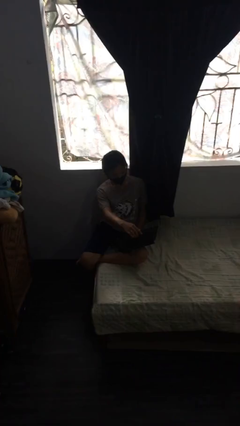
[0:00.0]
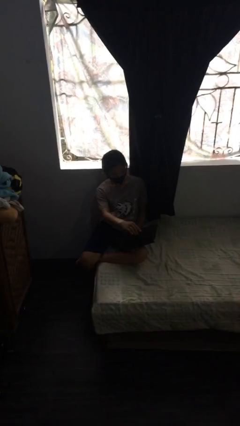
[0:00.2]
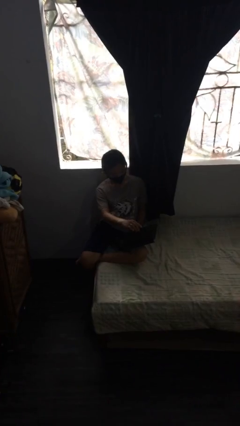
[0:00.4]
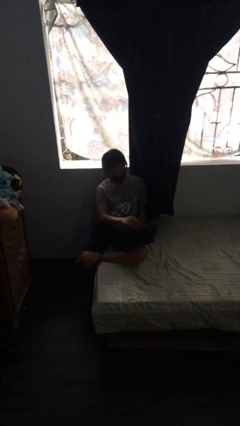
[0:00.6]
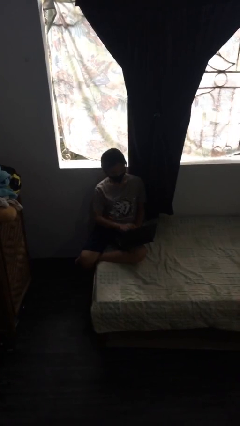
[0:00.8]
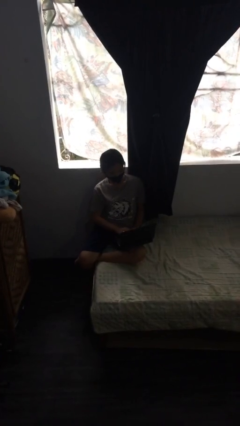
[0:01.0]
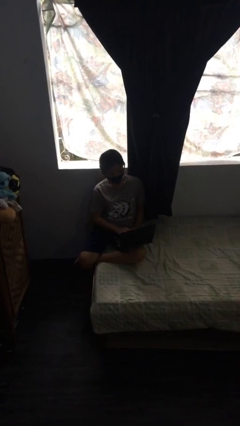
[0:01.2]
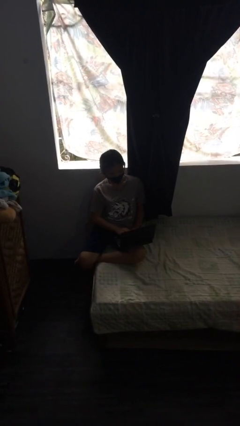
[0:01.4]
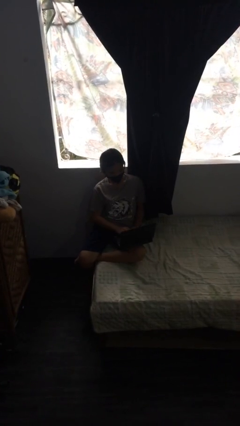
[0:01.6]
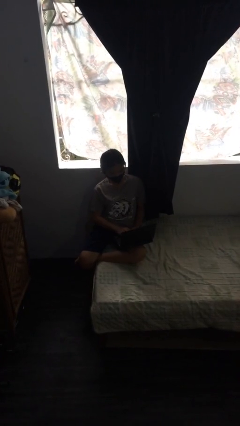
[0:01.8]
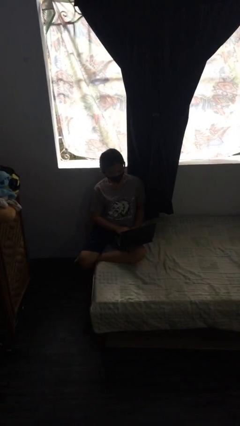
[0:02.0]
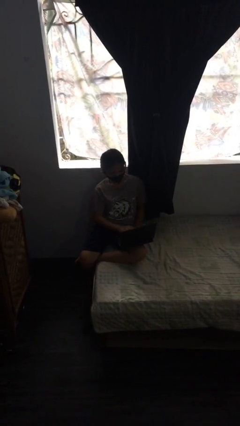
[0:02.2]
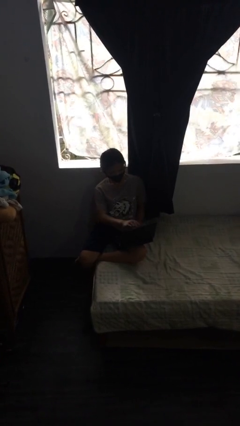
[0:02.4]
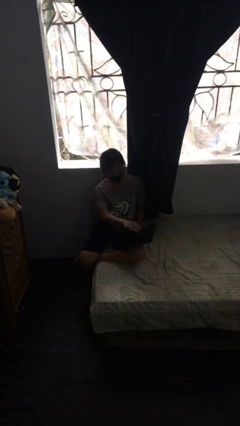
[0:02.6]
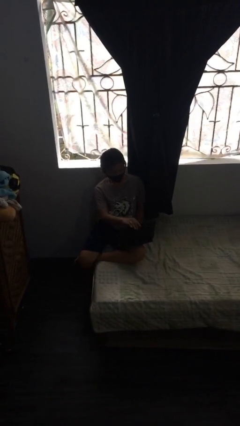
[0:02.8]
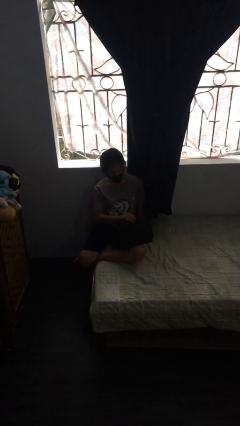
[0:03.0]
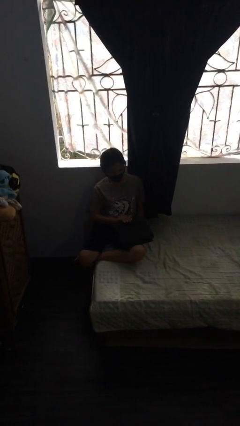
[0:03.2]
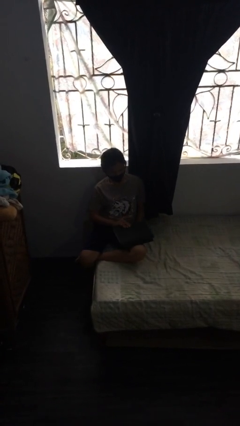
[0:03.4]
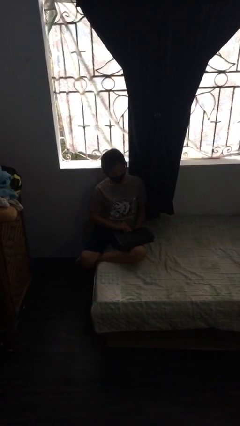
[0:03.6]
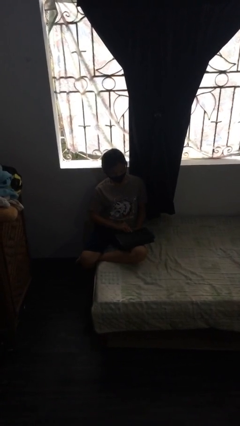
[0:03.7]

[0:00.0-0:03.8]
person interacts with laptop

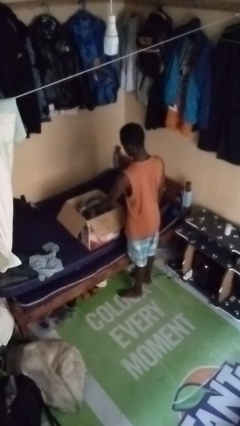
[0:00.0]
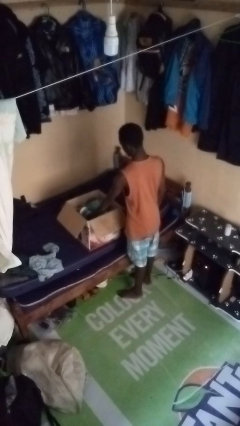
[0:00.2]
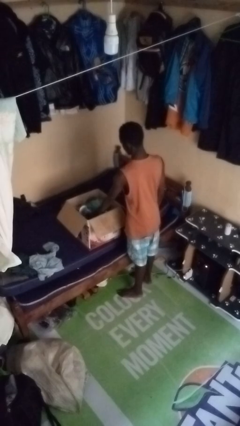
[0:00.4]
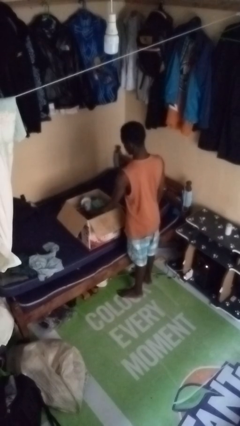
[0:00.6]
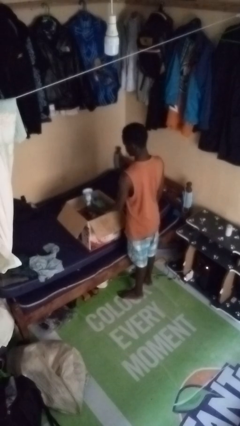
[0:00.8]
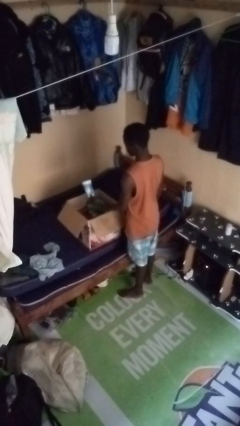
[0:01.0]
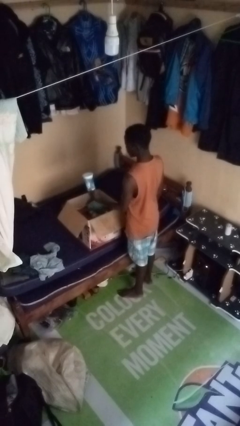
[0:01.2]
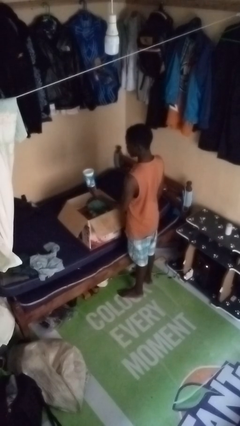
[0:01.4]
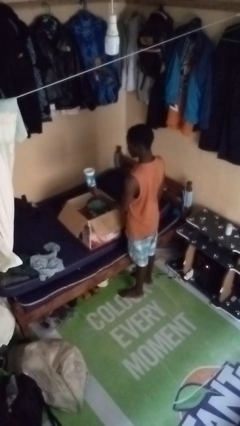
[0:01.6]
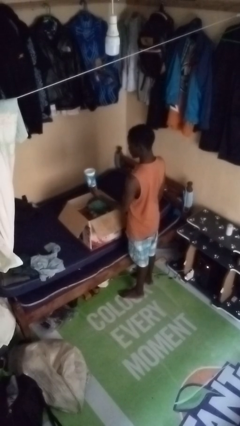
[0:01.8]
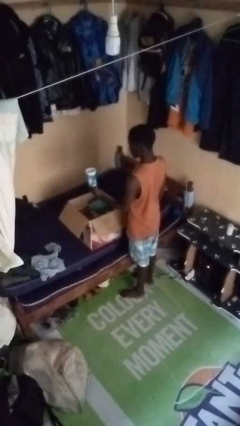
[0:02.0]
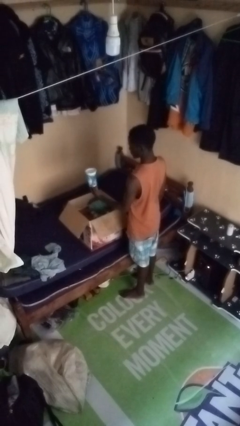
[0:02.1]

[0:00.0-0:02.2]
person takes object from box

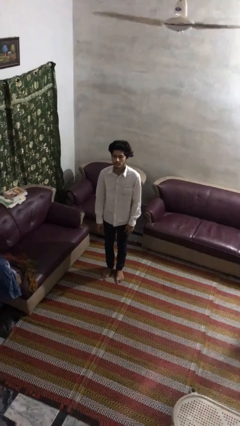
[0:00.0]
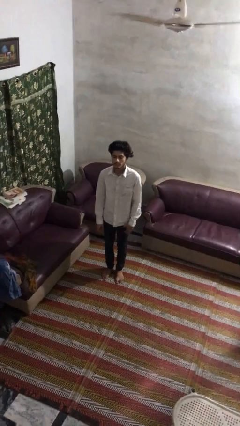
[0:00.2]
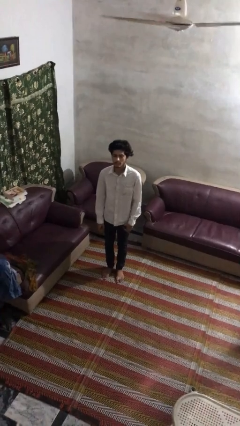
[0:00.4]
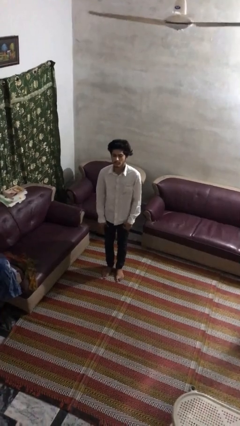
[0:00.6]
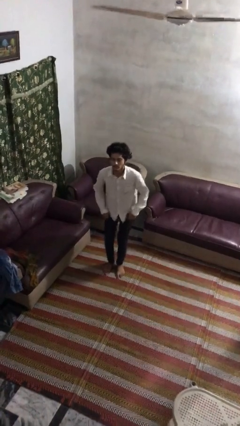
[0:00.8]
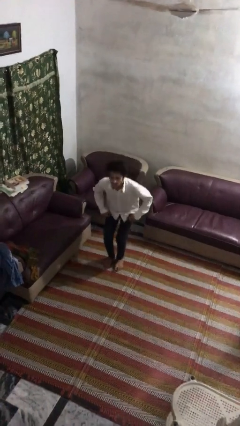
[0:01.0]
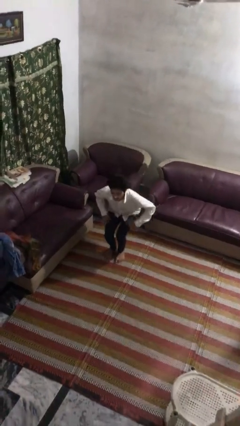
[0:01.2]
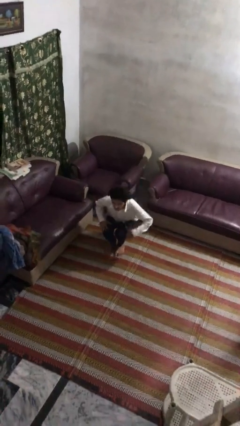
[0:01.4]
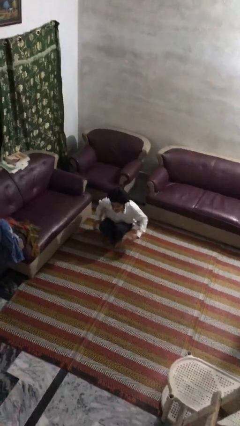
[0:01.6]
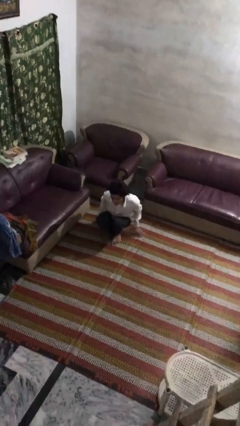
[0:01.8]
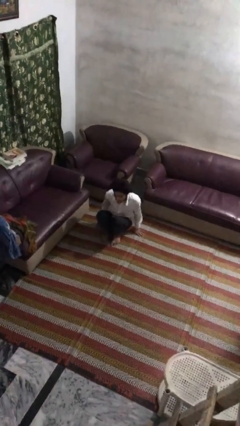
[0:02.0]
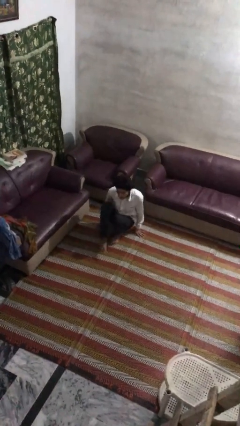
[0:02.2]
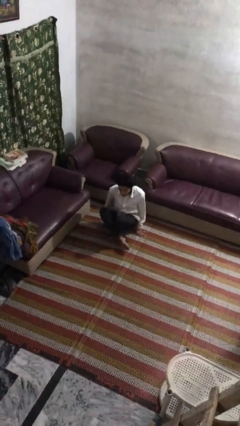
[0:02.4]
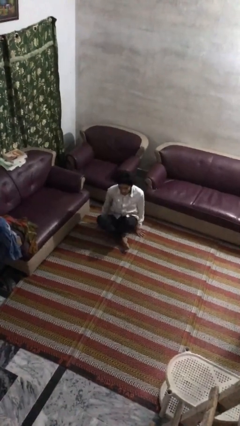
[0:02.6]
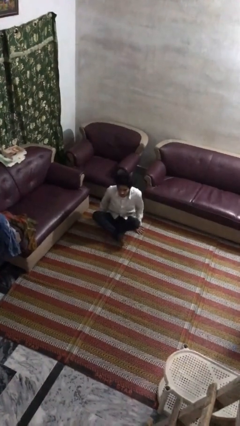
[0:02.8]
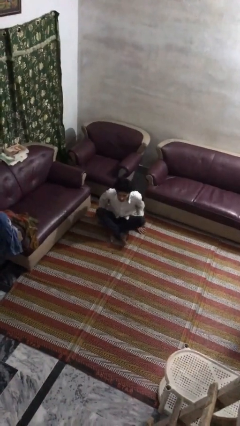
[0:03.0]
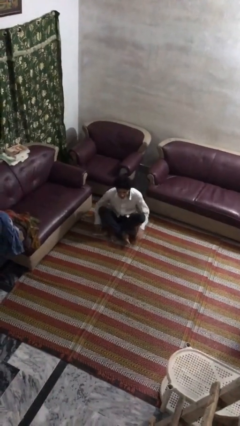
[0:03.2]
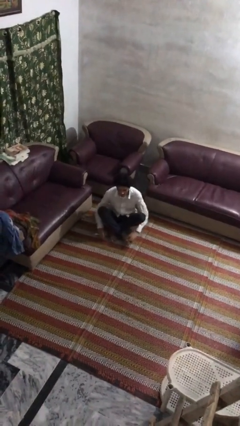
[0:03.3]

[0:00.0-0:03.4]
person sits crisscross

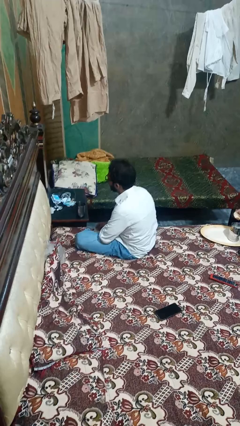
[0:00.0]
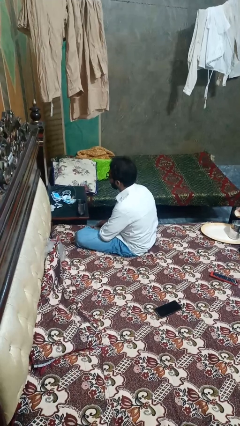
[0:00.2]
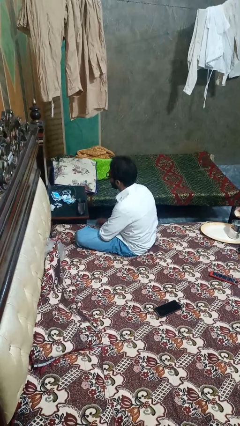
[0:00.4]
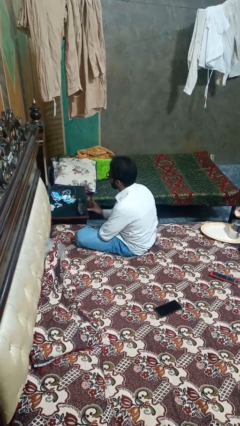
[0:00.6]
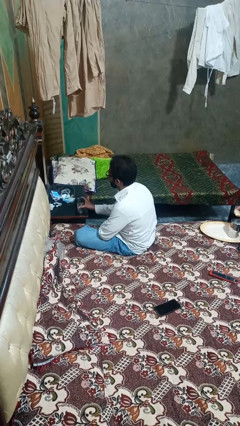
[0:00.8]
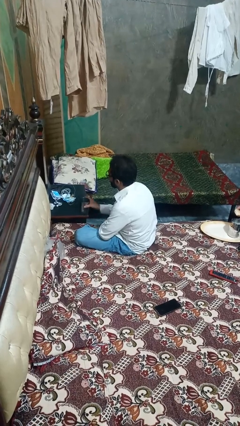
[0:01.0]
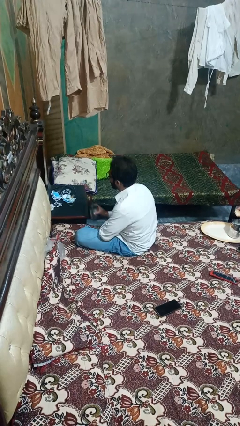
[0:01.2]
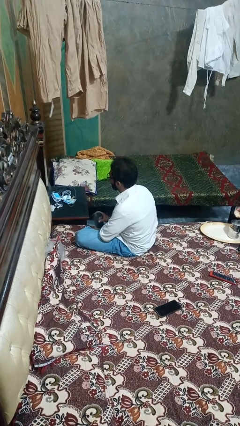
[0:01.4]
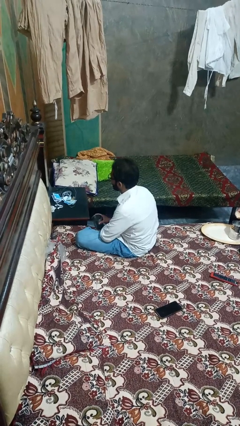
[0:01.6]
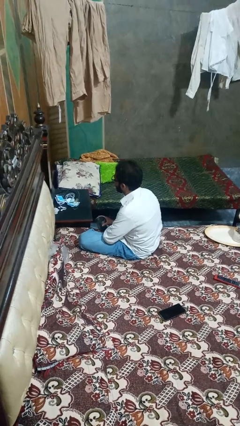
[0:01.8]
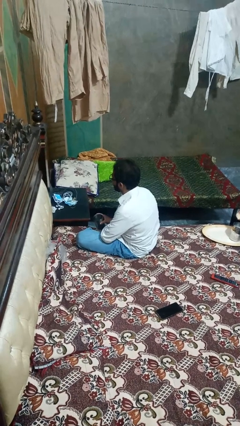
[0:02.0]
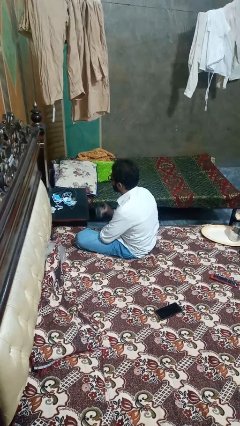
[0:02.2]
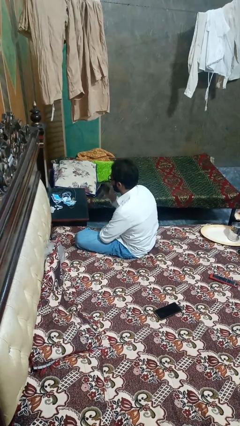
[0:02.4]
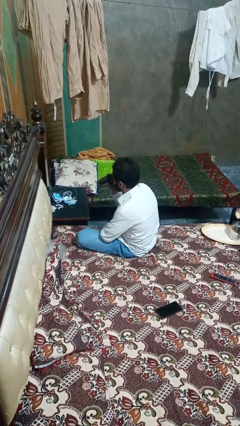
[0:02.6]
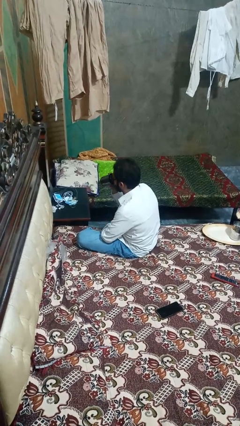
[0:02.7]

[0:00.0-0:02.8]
person picks up object from table

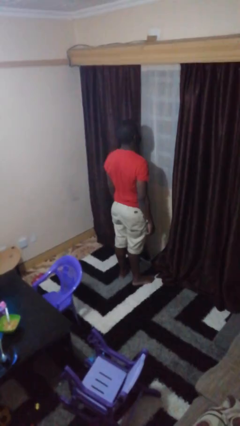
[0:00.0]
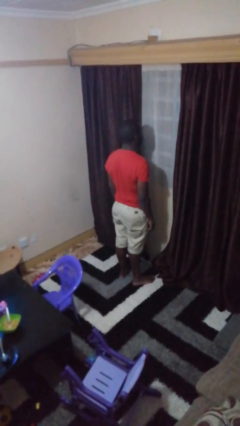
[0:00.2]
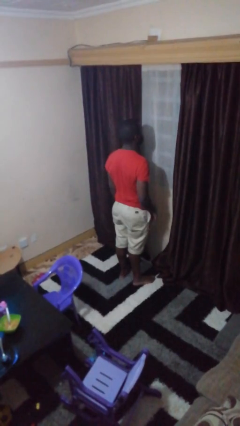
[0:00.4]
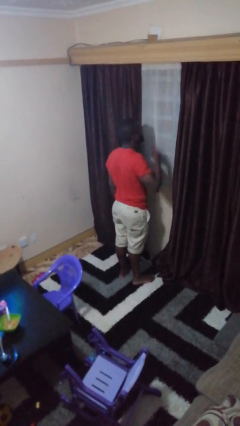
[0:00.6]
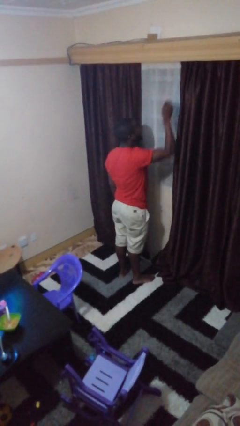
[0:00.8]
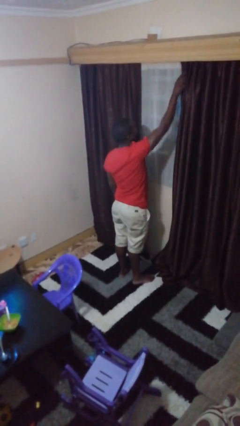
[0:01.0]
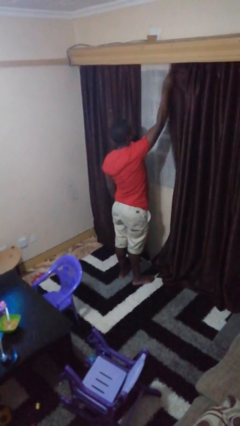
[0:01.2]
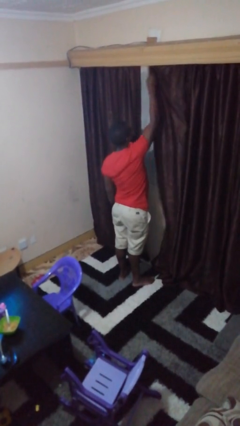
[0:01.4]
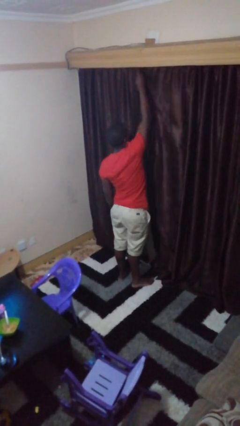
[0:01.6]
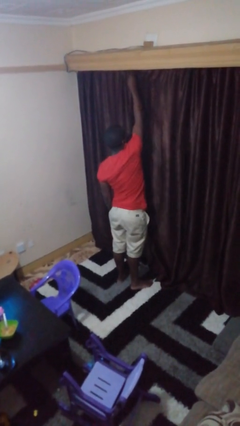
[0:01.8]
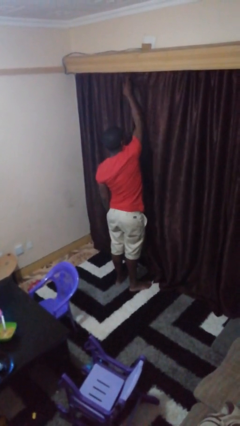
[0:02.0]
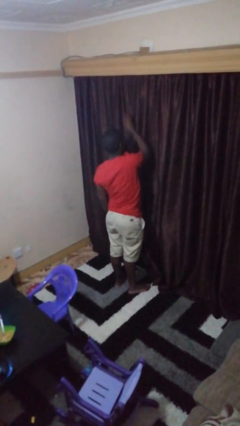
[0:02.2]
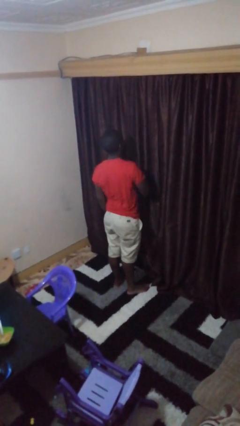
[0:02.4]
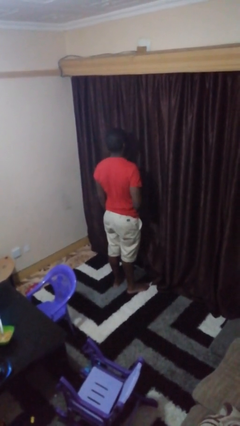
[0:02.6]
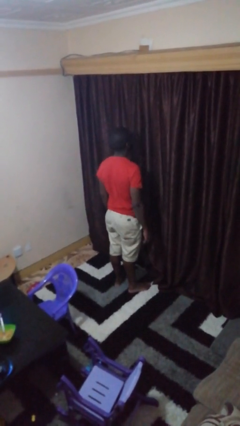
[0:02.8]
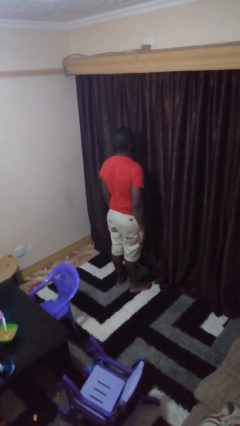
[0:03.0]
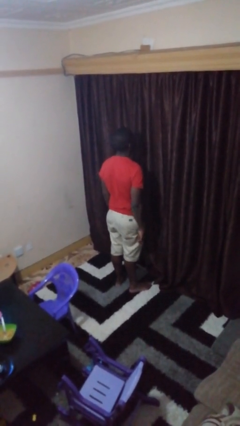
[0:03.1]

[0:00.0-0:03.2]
person closes curtains

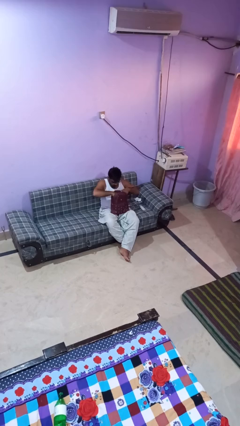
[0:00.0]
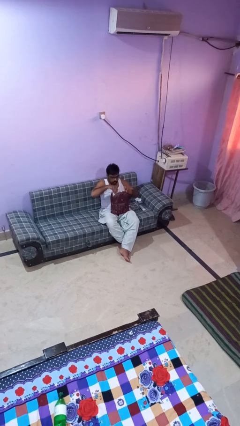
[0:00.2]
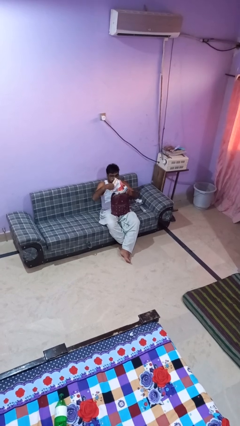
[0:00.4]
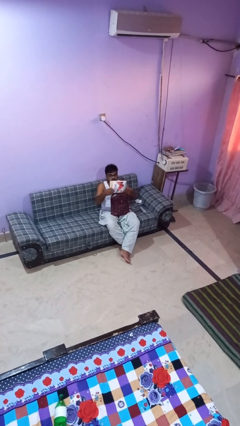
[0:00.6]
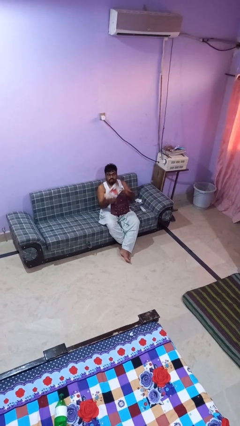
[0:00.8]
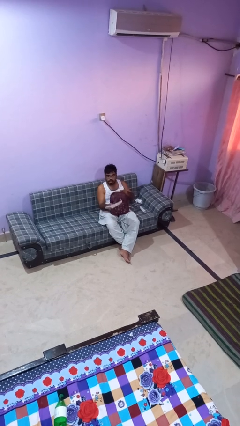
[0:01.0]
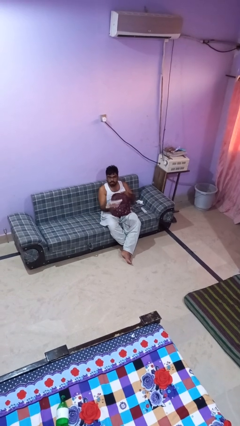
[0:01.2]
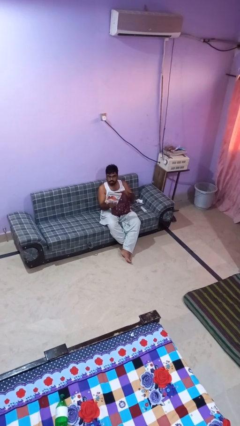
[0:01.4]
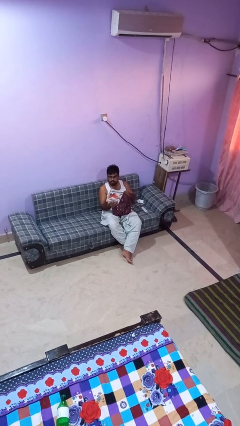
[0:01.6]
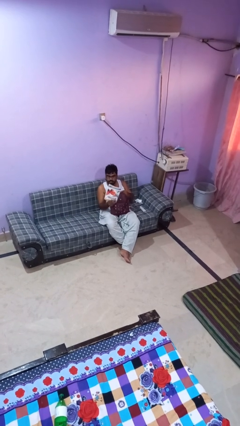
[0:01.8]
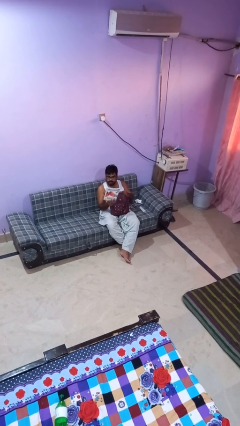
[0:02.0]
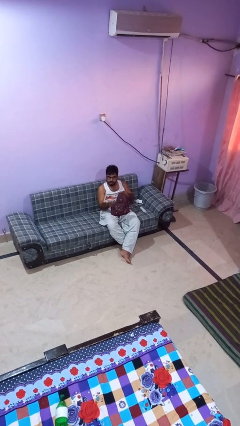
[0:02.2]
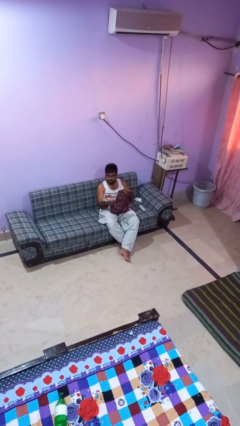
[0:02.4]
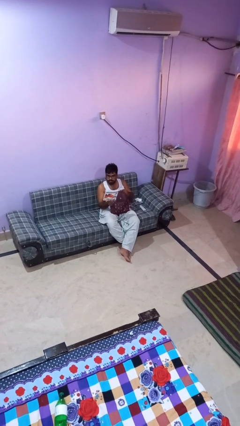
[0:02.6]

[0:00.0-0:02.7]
person takes object from backpack
